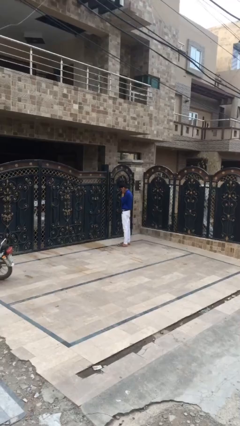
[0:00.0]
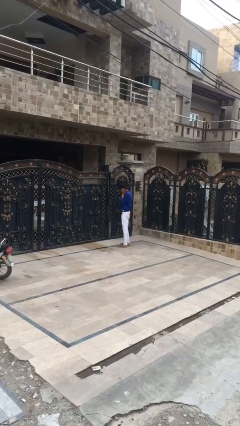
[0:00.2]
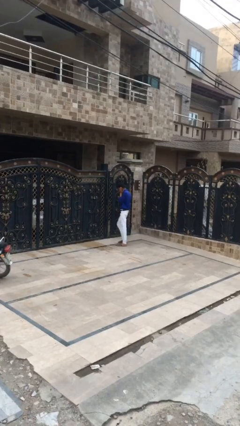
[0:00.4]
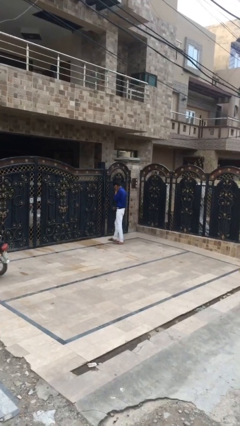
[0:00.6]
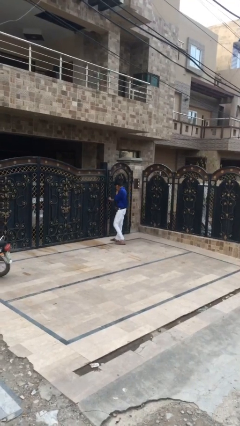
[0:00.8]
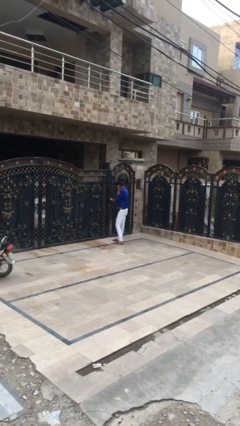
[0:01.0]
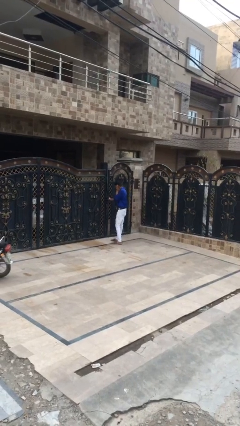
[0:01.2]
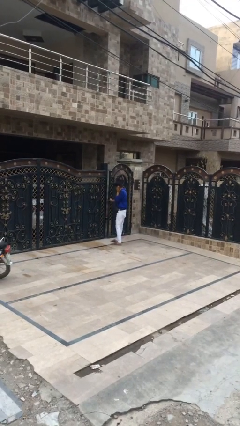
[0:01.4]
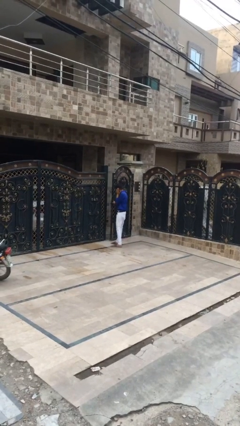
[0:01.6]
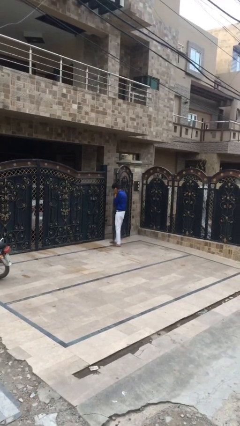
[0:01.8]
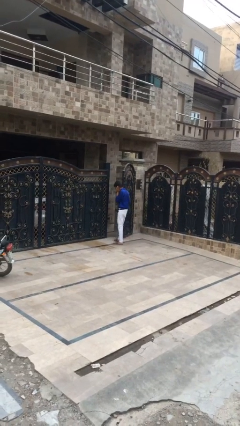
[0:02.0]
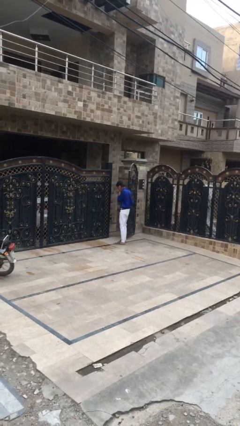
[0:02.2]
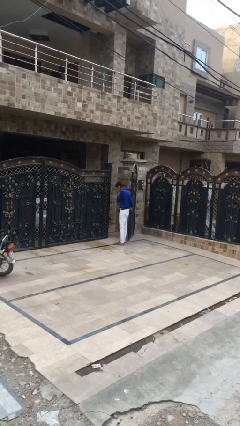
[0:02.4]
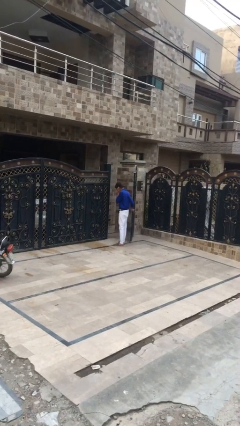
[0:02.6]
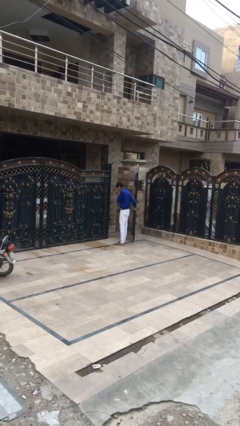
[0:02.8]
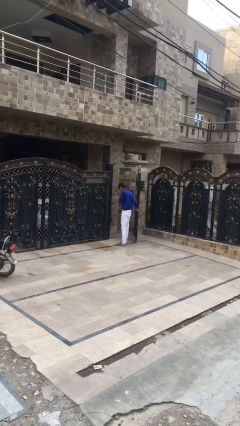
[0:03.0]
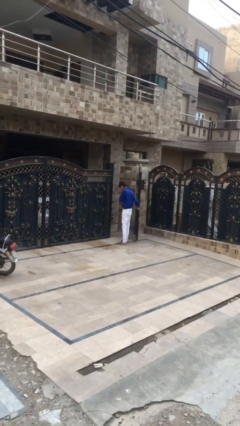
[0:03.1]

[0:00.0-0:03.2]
person opens facility door

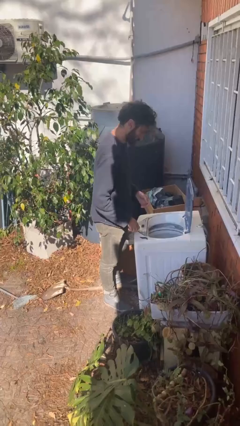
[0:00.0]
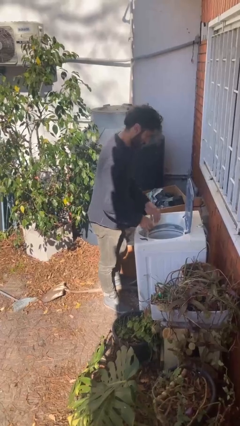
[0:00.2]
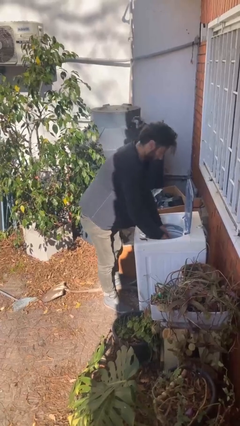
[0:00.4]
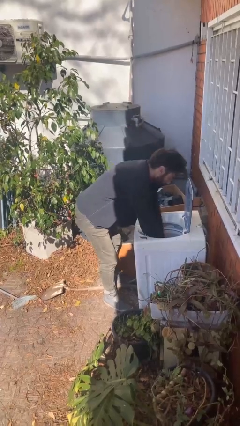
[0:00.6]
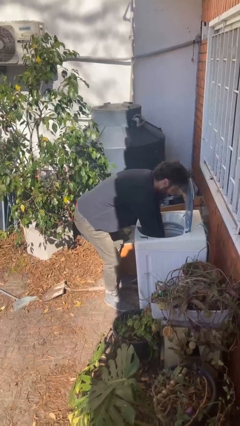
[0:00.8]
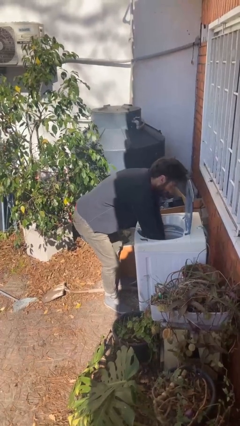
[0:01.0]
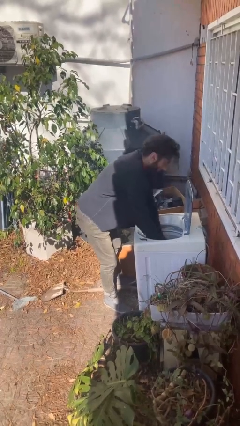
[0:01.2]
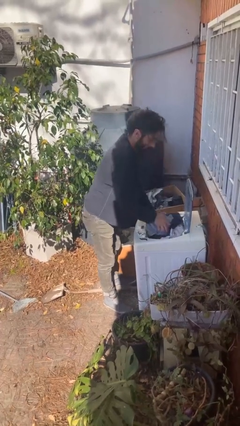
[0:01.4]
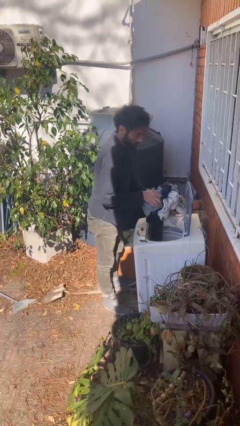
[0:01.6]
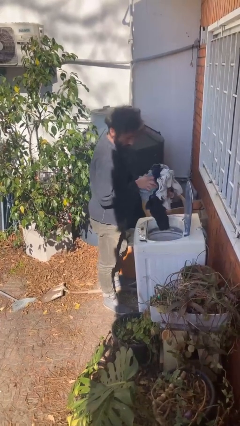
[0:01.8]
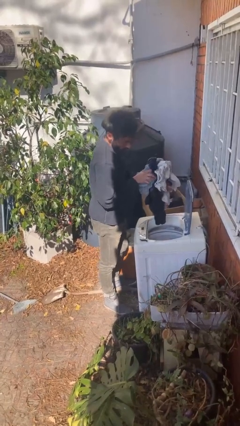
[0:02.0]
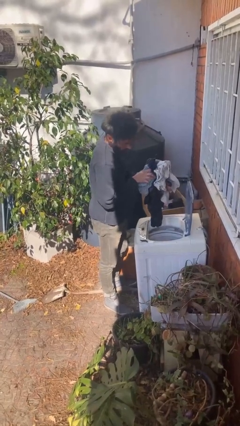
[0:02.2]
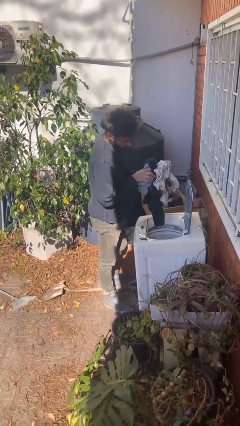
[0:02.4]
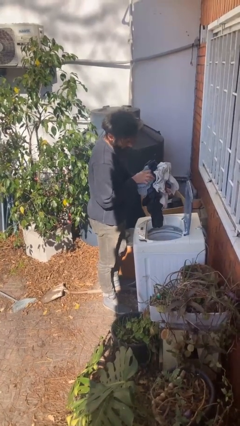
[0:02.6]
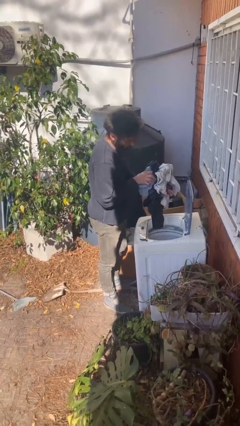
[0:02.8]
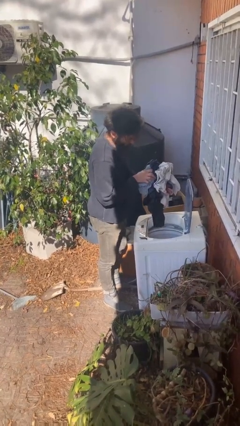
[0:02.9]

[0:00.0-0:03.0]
person loads clotheswasher

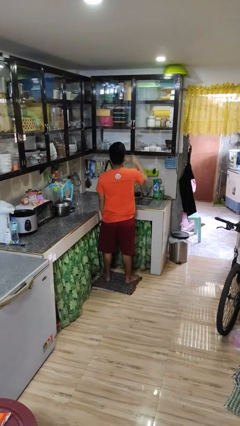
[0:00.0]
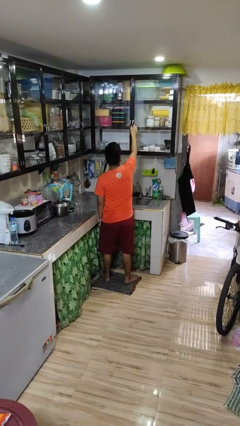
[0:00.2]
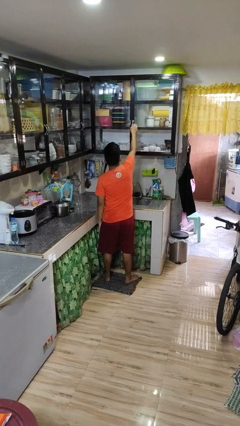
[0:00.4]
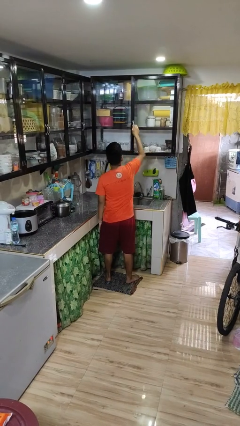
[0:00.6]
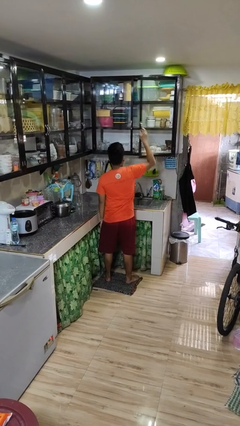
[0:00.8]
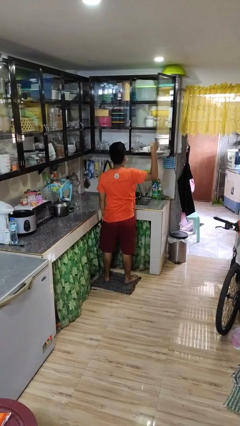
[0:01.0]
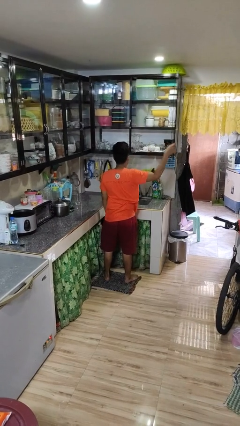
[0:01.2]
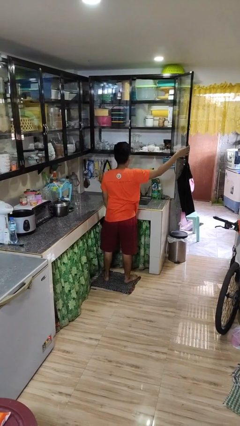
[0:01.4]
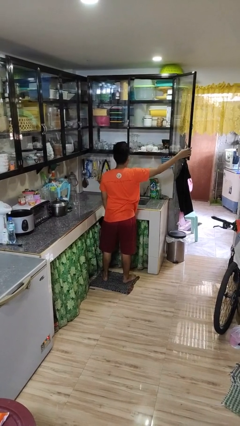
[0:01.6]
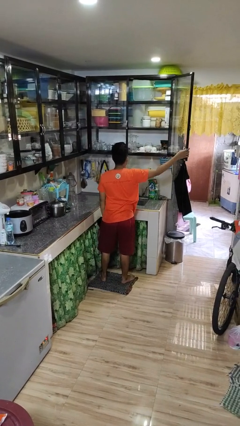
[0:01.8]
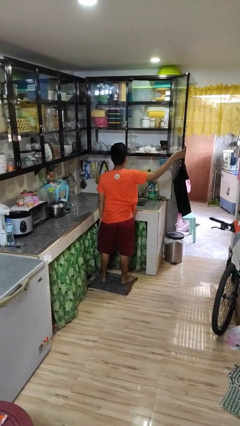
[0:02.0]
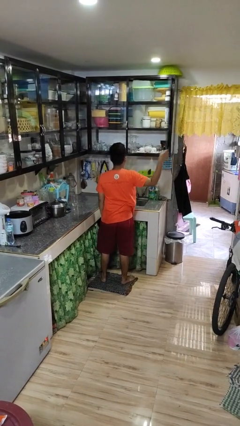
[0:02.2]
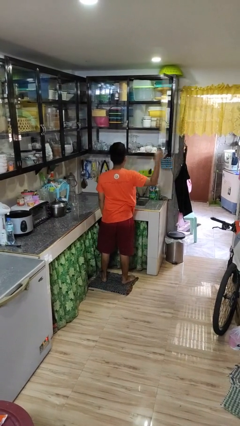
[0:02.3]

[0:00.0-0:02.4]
person opens cabinet

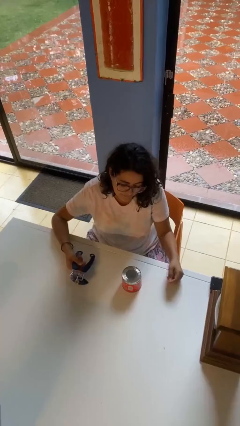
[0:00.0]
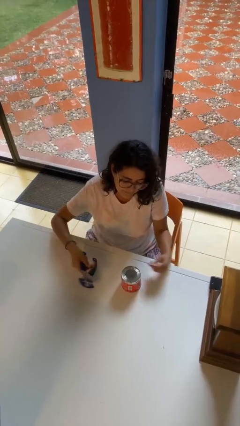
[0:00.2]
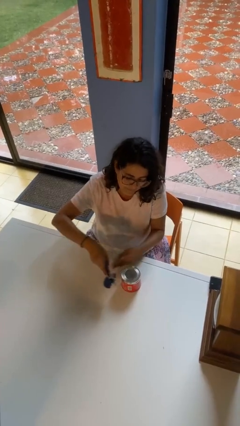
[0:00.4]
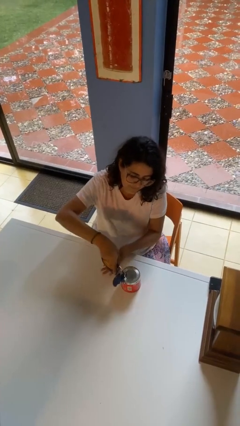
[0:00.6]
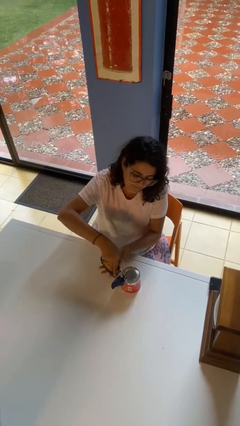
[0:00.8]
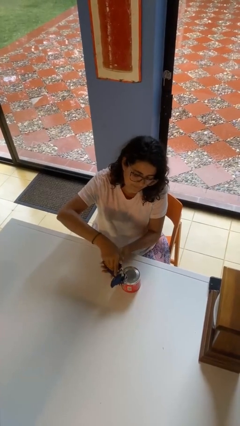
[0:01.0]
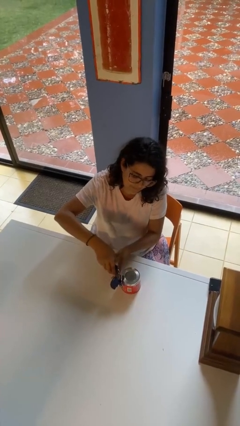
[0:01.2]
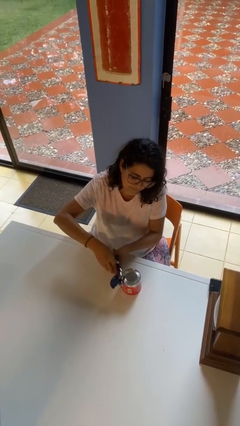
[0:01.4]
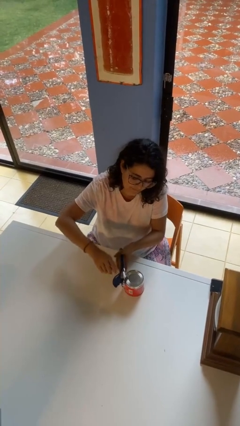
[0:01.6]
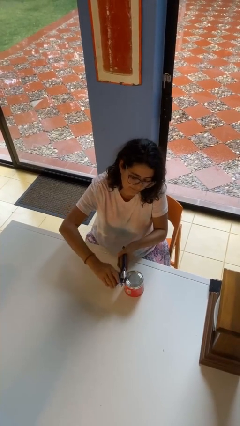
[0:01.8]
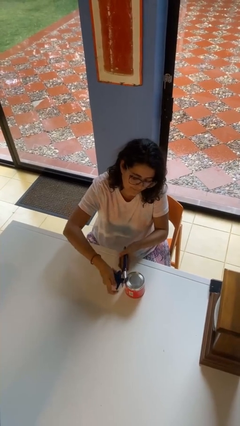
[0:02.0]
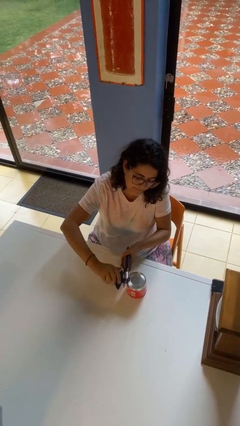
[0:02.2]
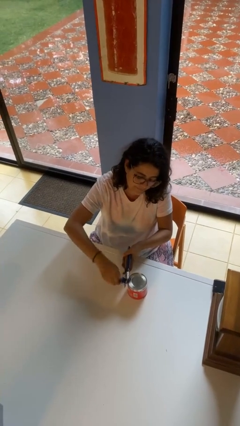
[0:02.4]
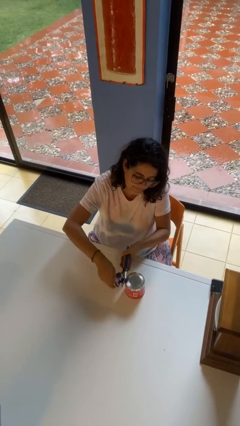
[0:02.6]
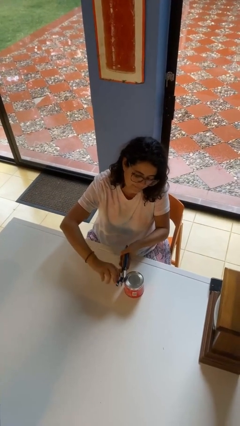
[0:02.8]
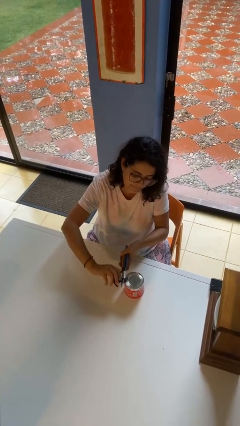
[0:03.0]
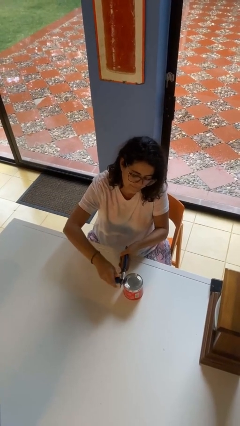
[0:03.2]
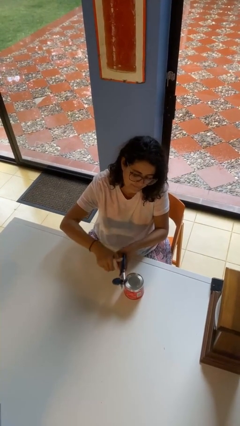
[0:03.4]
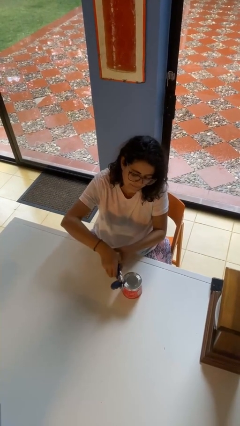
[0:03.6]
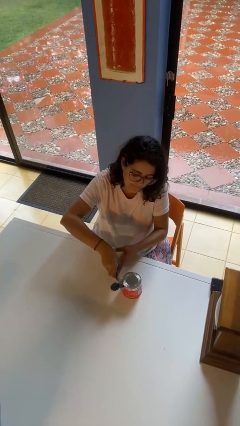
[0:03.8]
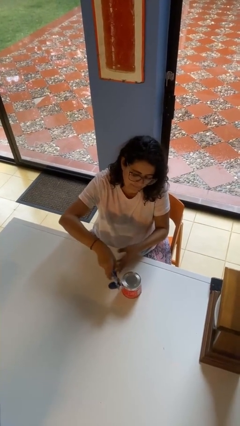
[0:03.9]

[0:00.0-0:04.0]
person opens can with can opener

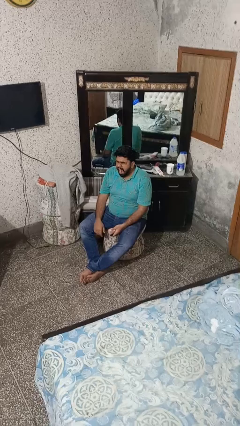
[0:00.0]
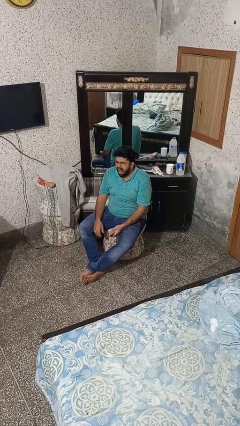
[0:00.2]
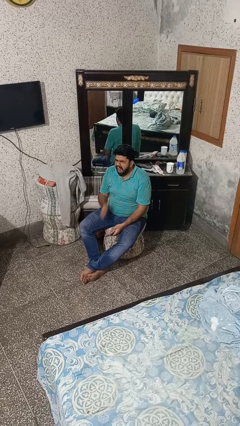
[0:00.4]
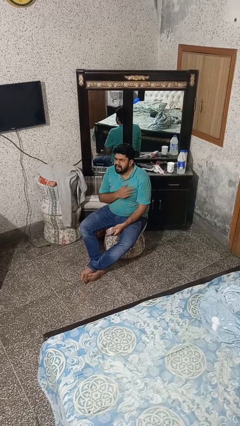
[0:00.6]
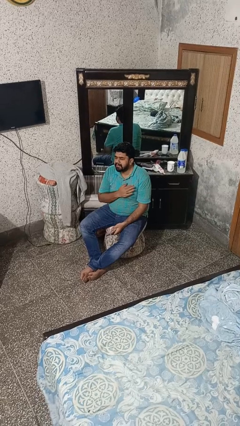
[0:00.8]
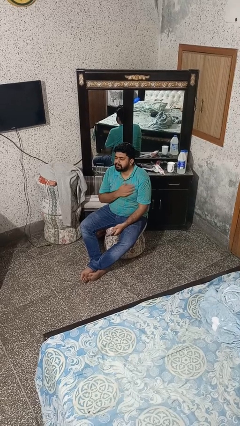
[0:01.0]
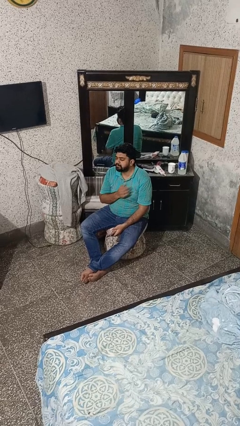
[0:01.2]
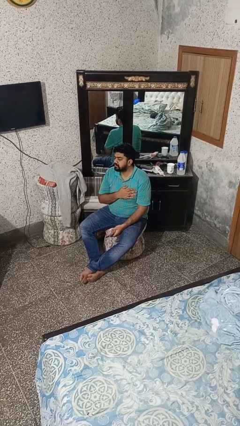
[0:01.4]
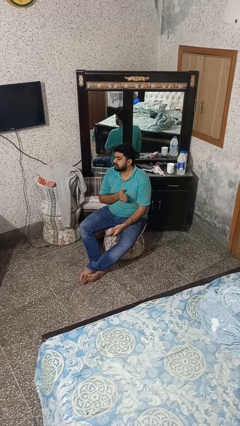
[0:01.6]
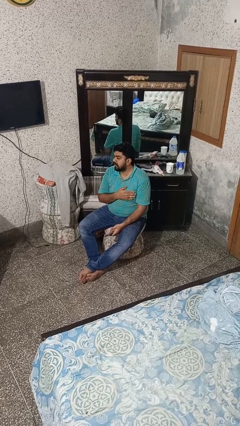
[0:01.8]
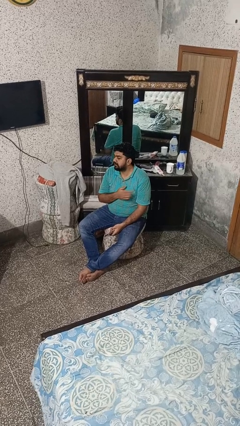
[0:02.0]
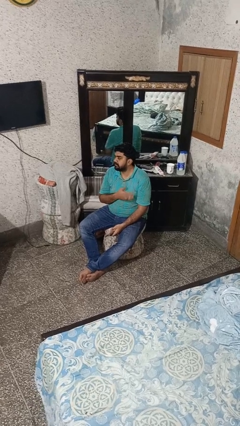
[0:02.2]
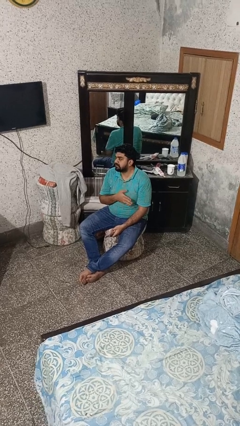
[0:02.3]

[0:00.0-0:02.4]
person drums on chest

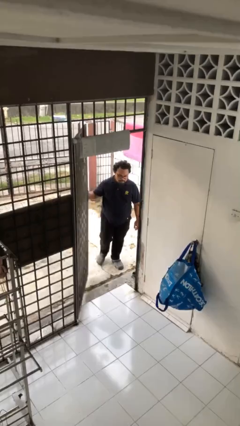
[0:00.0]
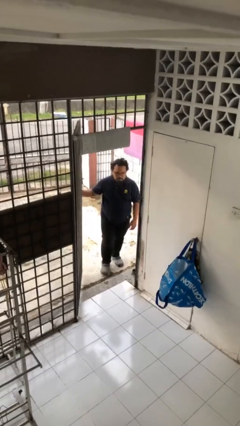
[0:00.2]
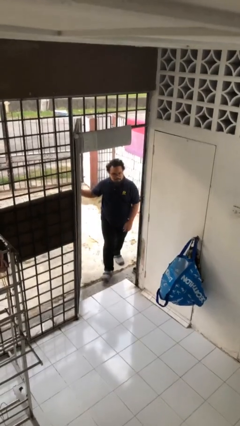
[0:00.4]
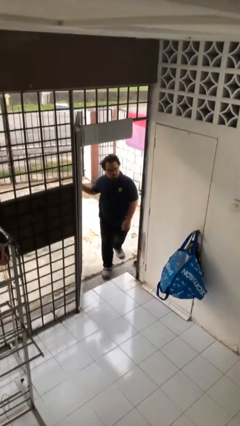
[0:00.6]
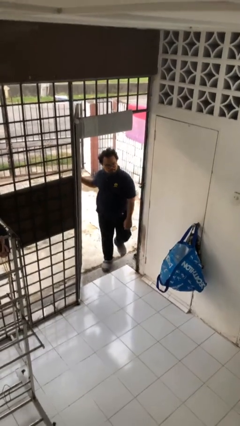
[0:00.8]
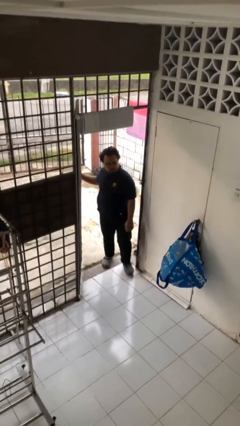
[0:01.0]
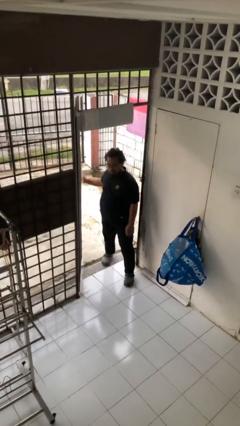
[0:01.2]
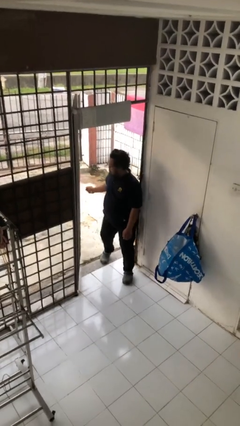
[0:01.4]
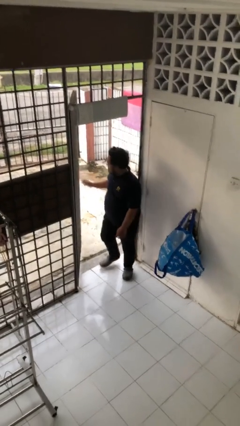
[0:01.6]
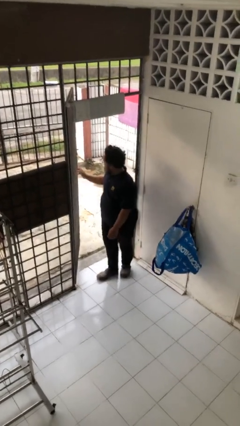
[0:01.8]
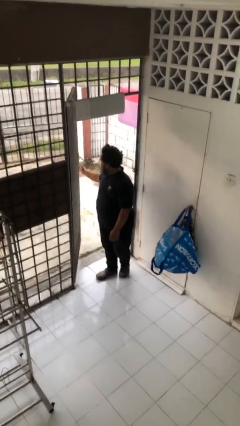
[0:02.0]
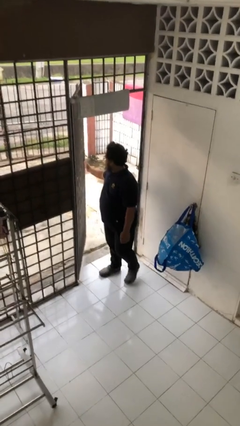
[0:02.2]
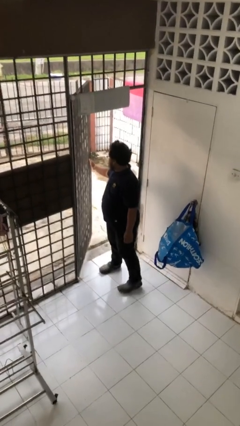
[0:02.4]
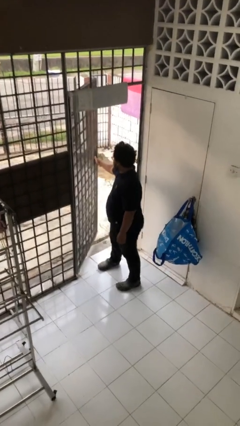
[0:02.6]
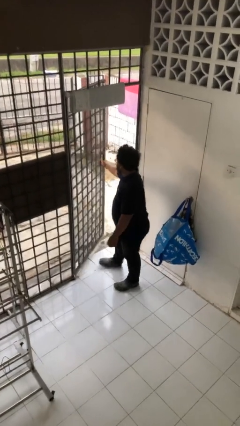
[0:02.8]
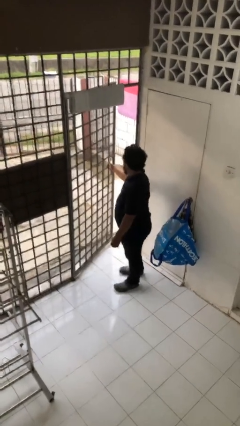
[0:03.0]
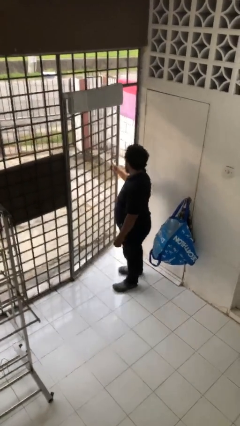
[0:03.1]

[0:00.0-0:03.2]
person enters scene through structure
